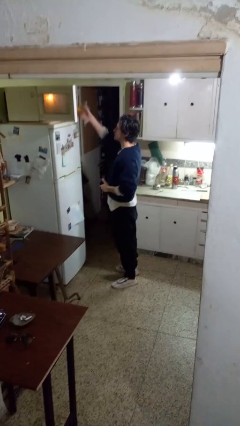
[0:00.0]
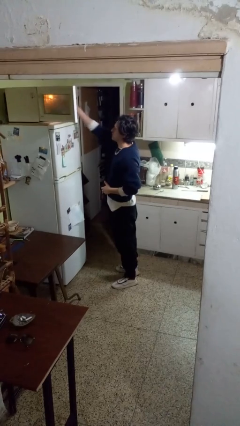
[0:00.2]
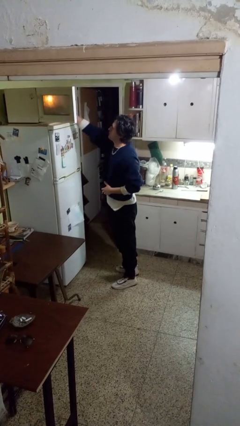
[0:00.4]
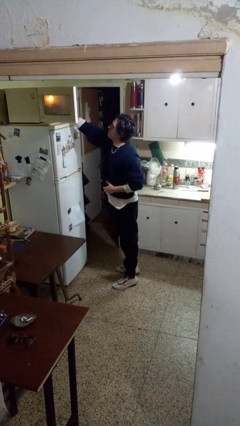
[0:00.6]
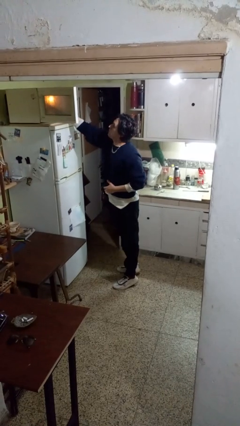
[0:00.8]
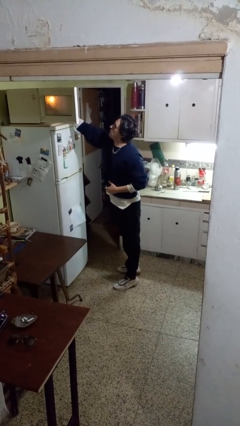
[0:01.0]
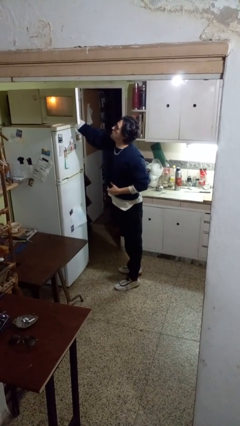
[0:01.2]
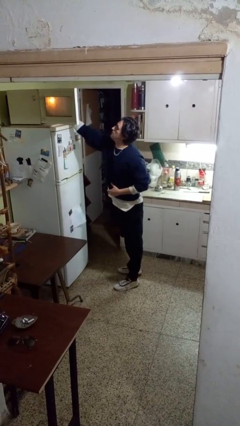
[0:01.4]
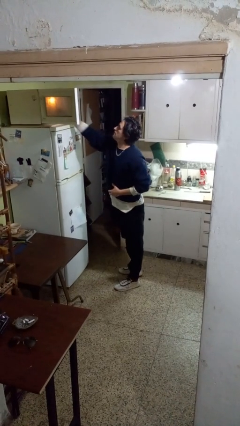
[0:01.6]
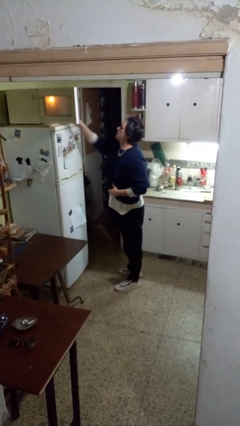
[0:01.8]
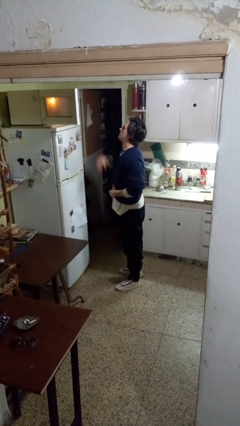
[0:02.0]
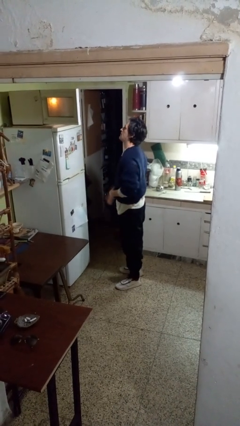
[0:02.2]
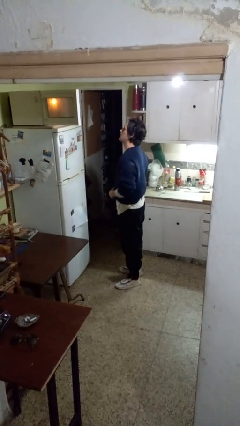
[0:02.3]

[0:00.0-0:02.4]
person puts object into microwave

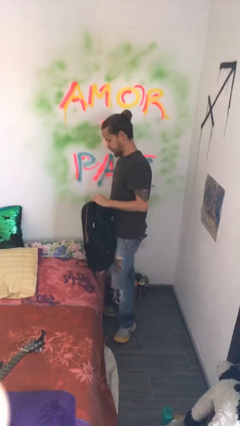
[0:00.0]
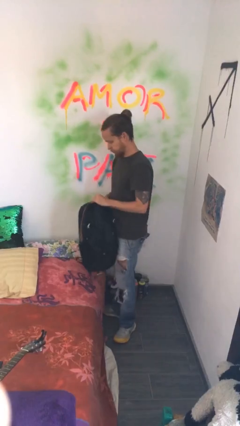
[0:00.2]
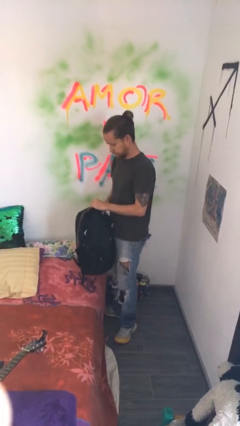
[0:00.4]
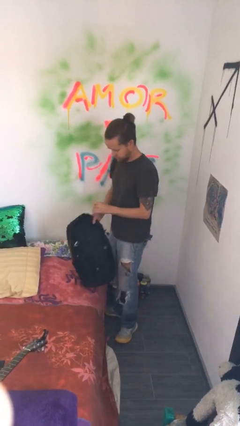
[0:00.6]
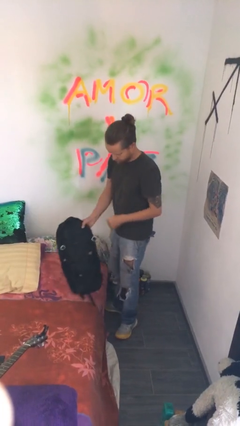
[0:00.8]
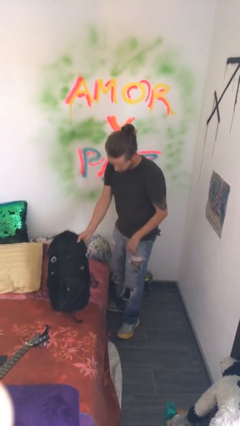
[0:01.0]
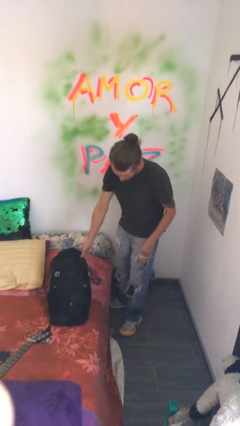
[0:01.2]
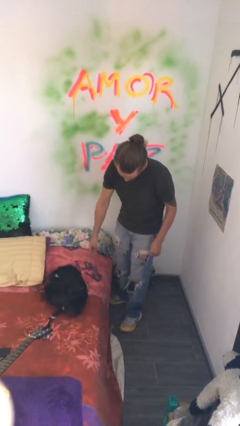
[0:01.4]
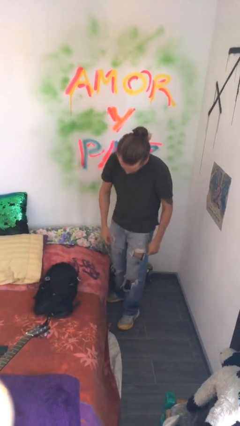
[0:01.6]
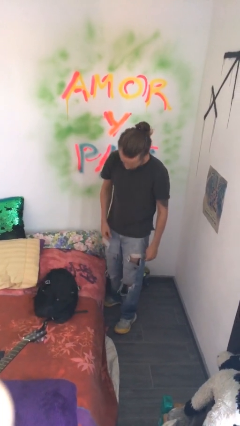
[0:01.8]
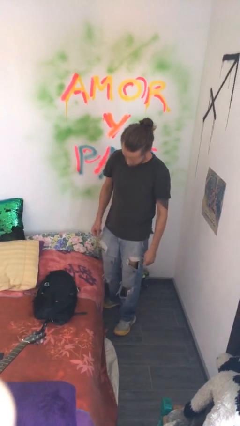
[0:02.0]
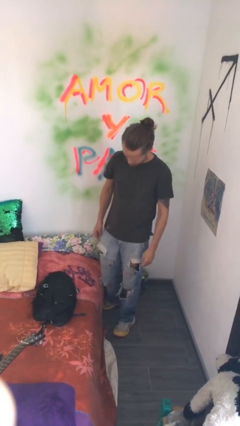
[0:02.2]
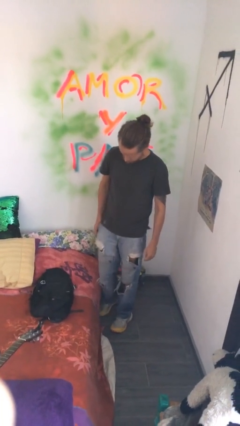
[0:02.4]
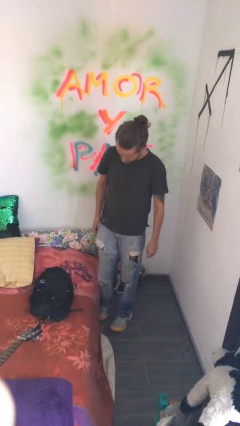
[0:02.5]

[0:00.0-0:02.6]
person puts down object on bed

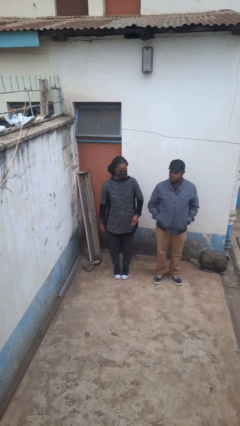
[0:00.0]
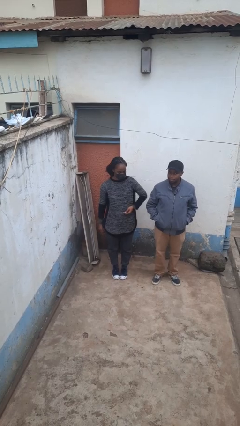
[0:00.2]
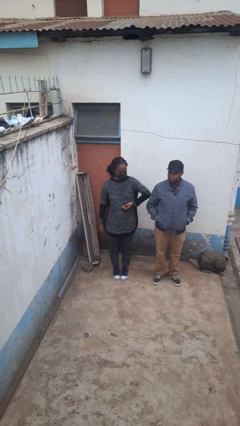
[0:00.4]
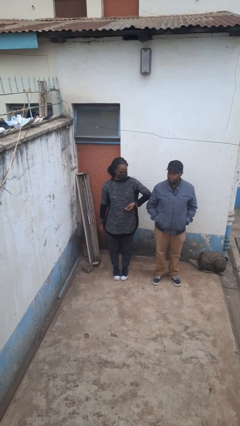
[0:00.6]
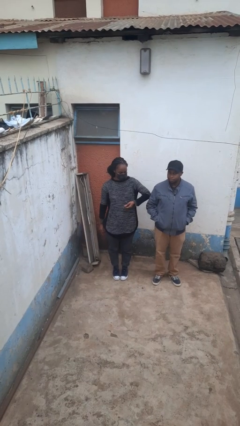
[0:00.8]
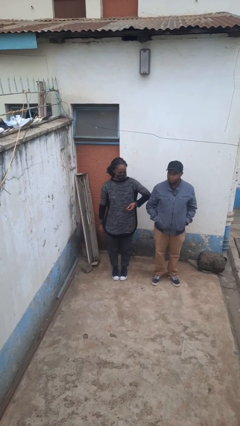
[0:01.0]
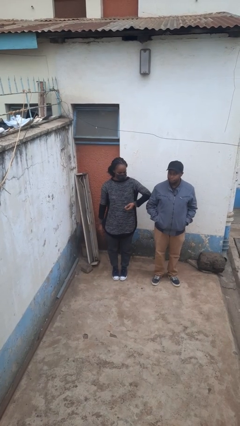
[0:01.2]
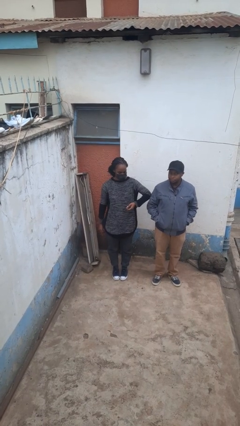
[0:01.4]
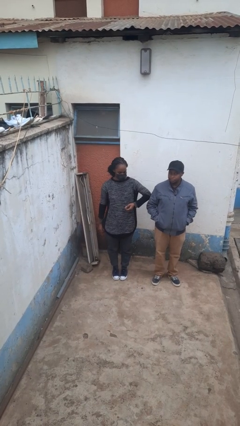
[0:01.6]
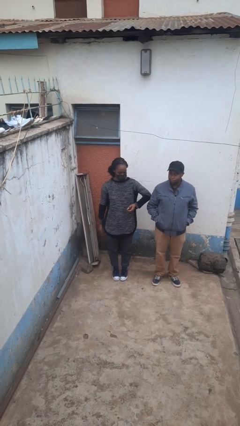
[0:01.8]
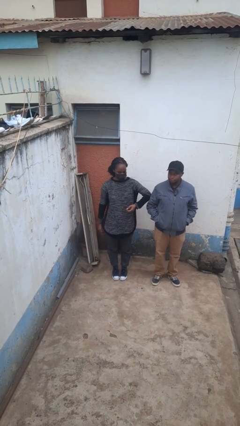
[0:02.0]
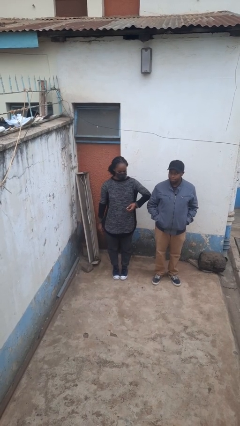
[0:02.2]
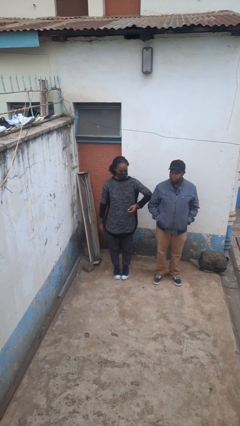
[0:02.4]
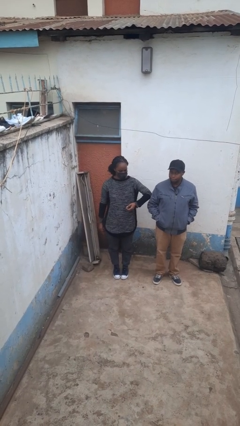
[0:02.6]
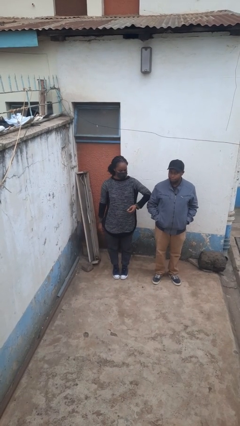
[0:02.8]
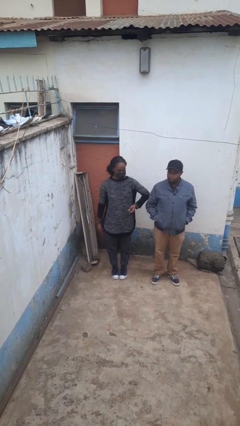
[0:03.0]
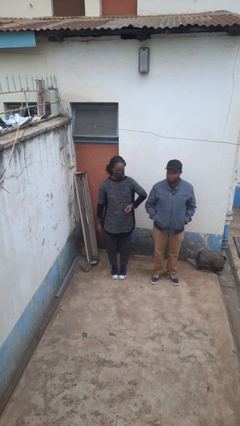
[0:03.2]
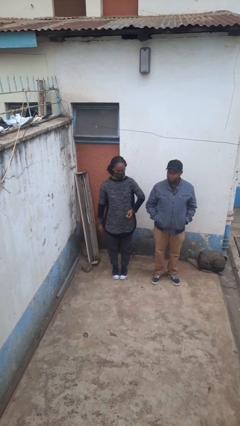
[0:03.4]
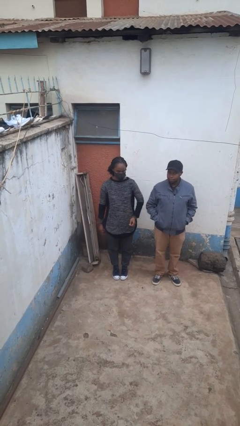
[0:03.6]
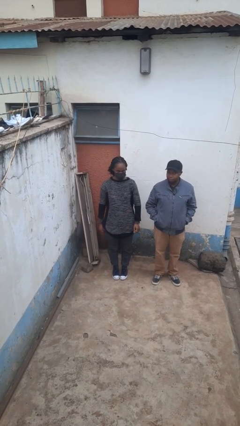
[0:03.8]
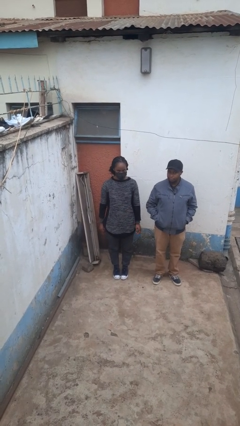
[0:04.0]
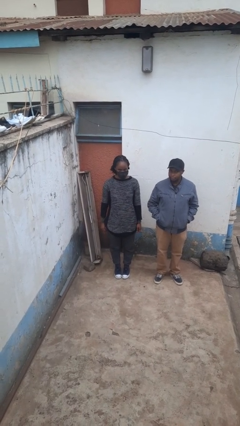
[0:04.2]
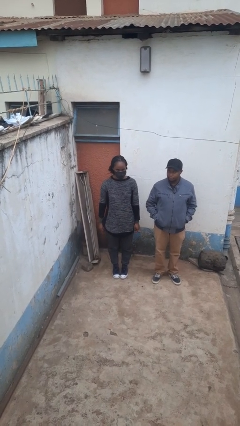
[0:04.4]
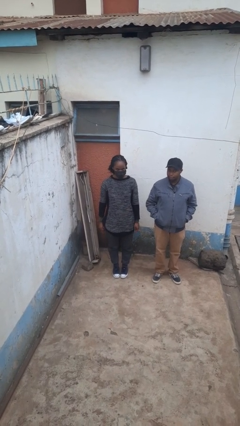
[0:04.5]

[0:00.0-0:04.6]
person nudges person with elbow

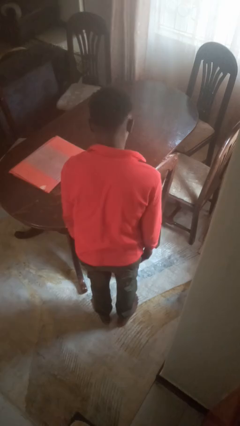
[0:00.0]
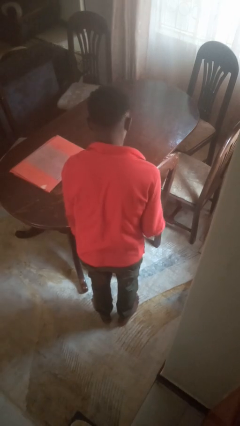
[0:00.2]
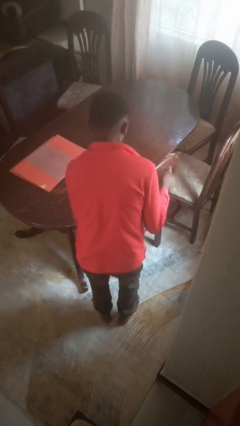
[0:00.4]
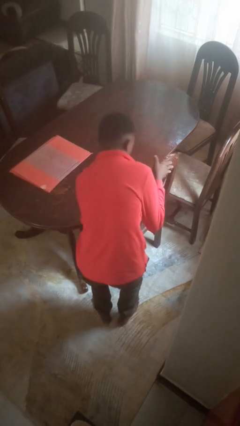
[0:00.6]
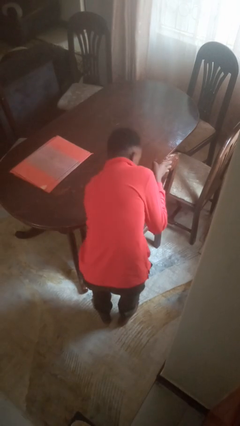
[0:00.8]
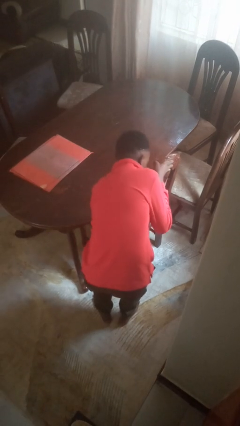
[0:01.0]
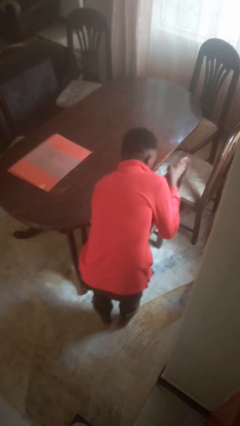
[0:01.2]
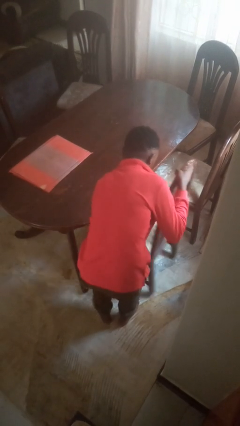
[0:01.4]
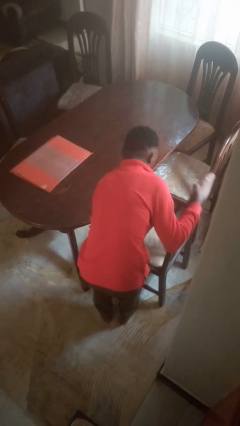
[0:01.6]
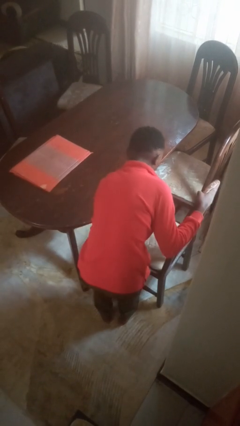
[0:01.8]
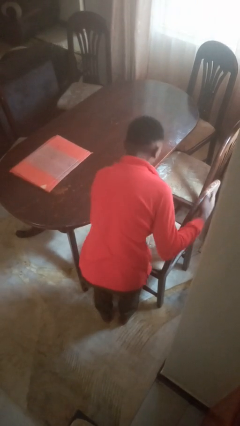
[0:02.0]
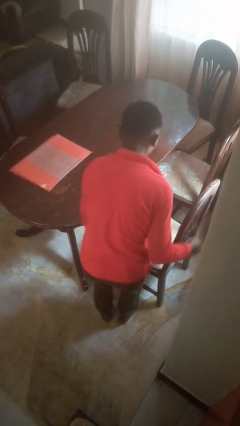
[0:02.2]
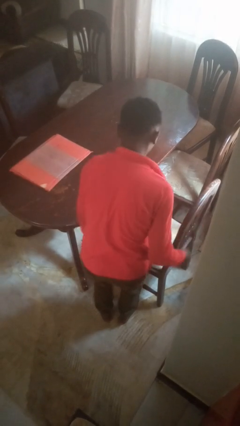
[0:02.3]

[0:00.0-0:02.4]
person pulls out chair

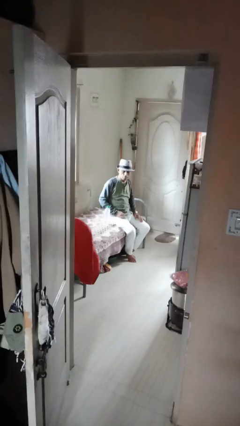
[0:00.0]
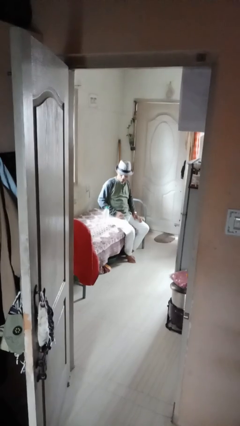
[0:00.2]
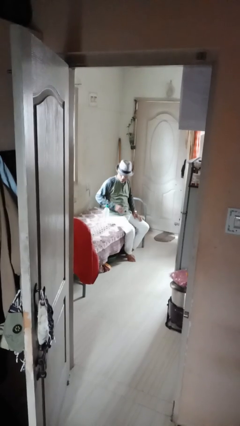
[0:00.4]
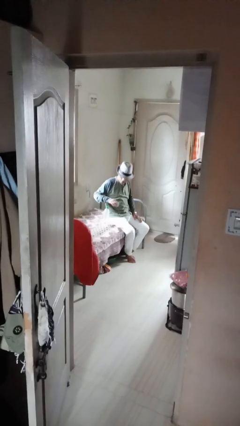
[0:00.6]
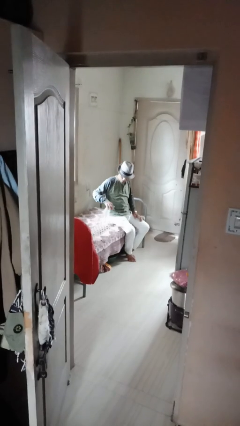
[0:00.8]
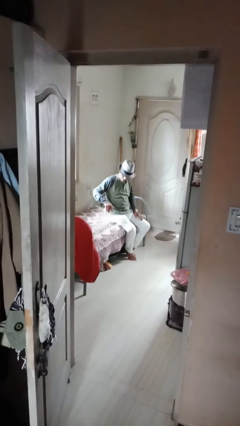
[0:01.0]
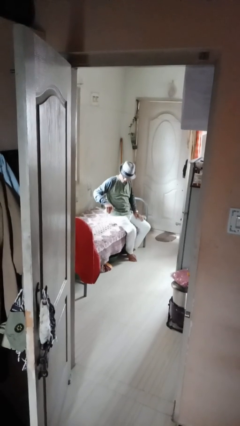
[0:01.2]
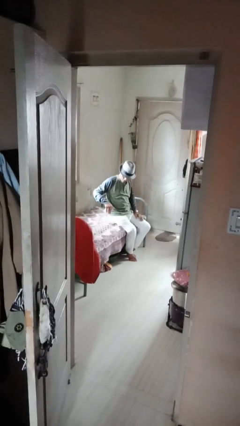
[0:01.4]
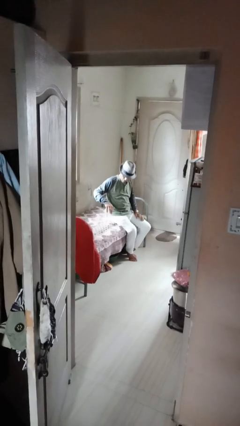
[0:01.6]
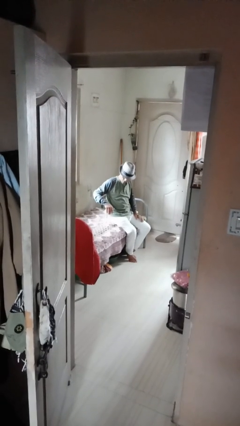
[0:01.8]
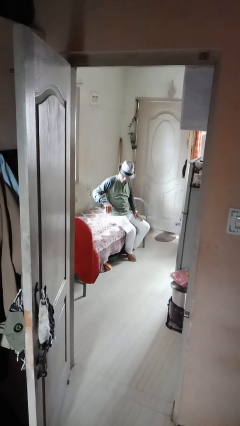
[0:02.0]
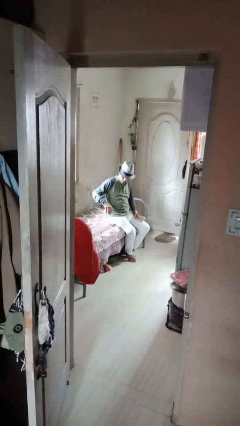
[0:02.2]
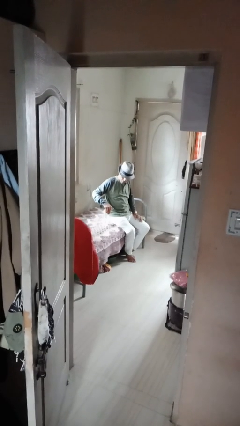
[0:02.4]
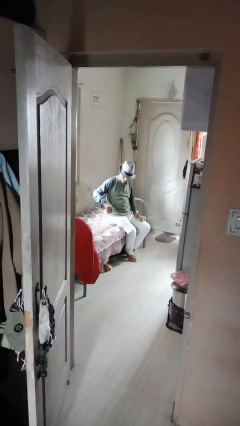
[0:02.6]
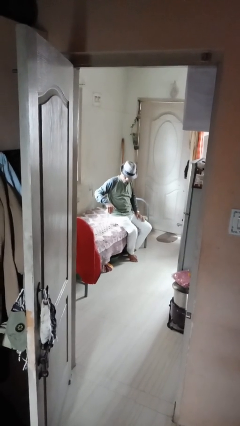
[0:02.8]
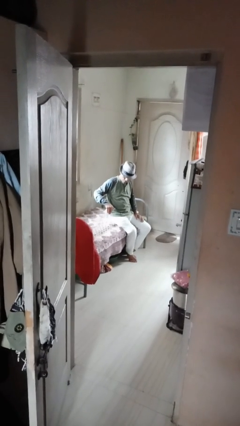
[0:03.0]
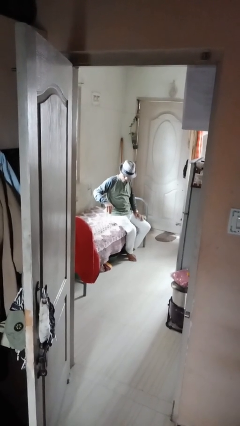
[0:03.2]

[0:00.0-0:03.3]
person taps object with finger

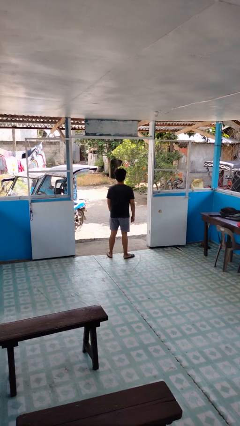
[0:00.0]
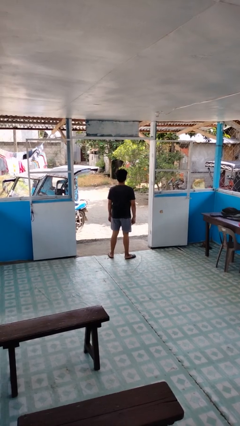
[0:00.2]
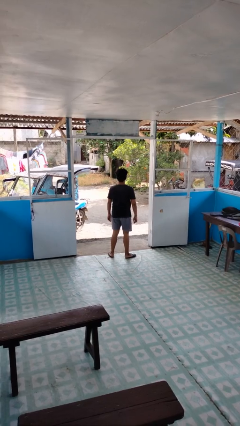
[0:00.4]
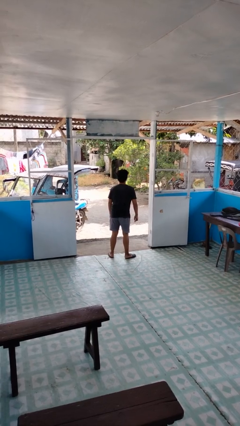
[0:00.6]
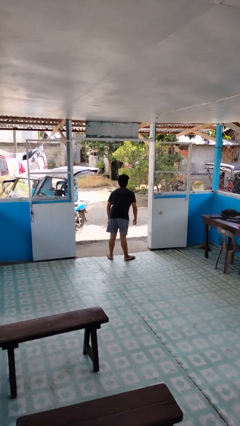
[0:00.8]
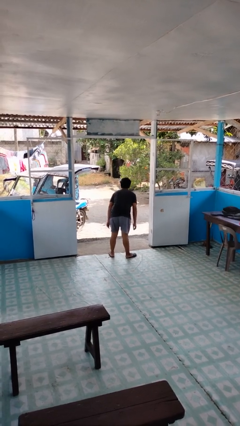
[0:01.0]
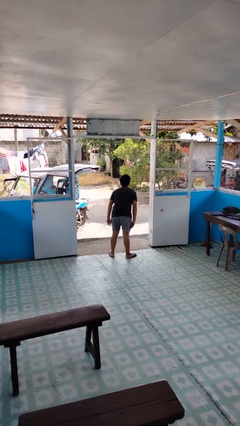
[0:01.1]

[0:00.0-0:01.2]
person wiggles hips

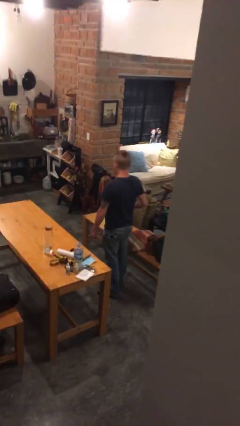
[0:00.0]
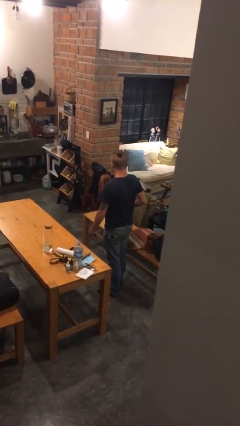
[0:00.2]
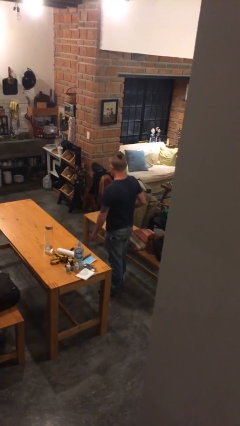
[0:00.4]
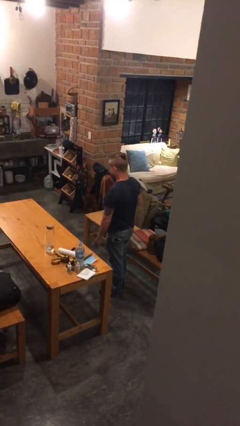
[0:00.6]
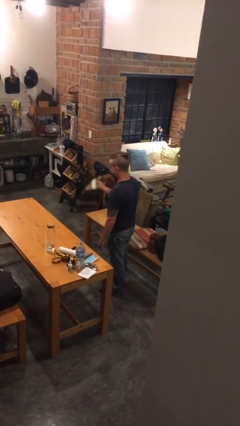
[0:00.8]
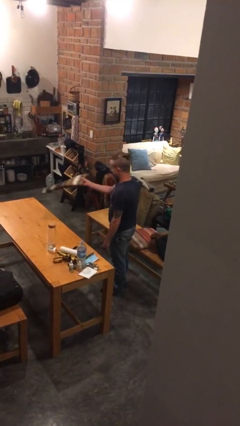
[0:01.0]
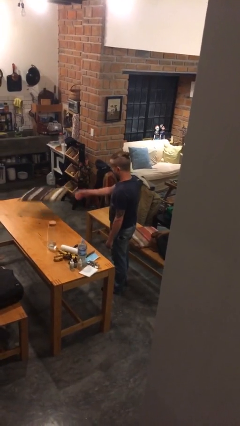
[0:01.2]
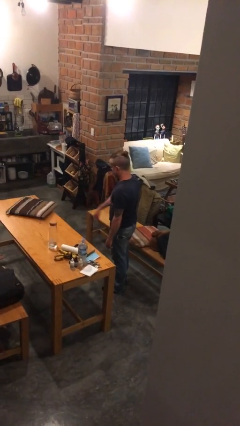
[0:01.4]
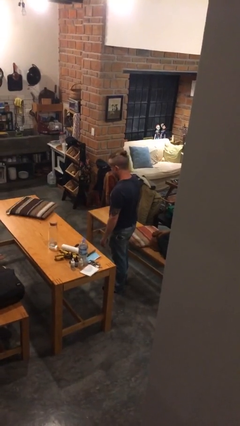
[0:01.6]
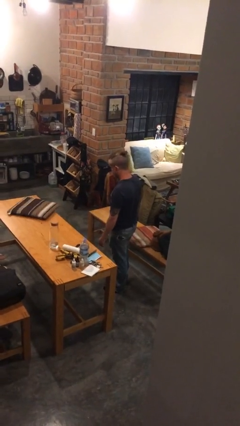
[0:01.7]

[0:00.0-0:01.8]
person throws object on table
